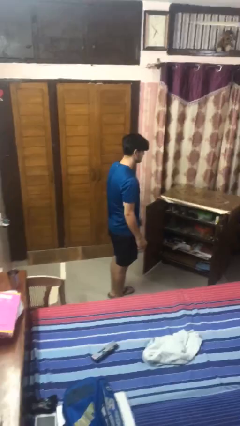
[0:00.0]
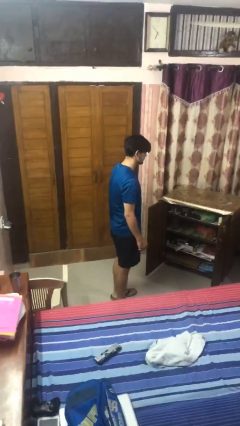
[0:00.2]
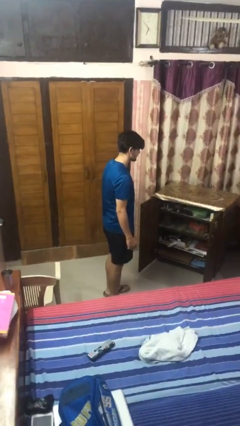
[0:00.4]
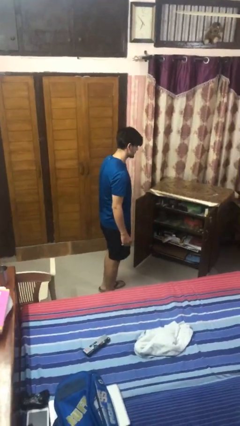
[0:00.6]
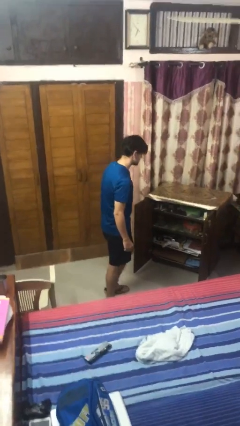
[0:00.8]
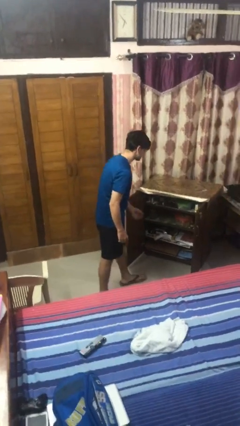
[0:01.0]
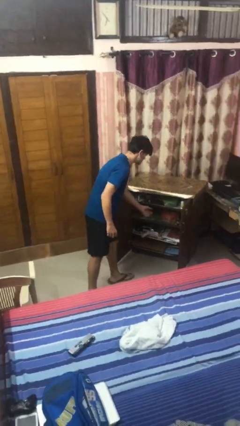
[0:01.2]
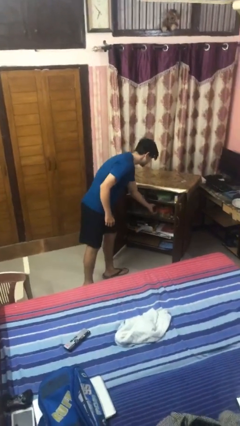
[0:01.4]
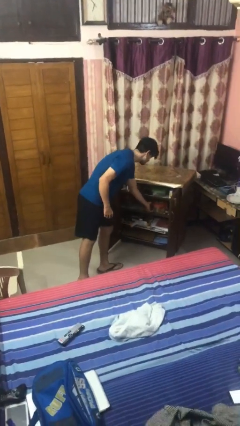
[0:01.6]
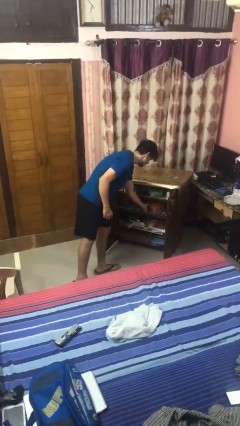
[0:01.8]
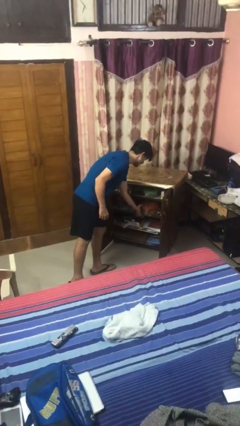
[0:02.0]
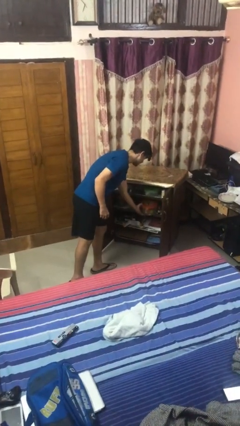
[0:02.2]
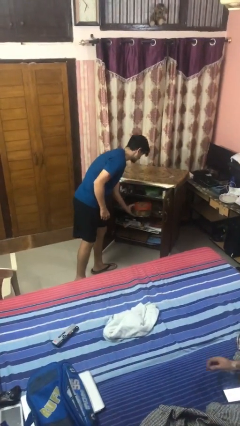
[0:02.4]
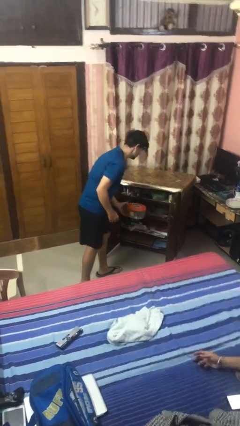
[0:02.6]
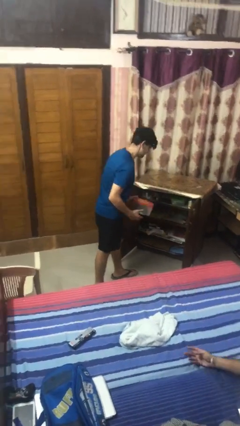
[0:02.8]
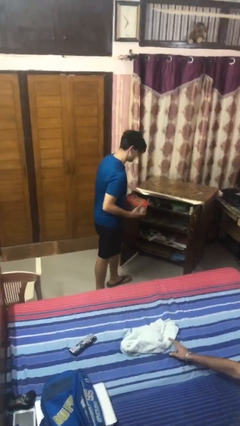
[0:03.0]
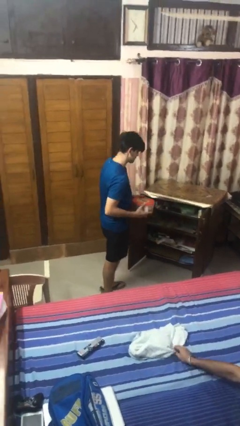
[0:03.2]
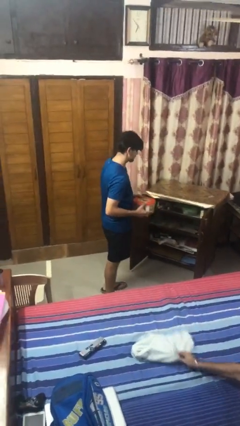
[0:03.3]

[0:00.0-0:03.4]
person picks up object from cabinet

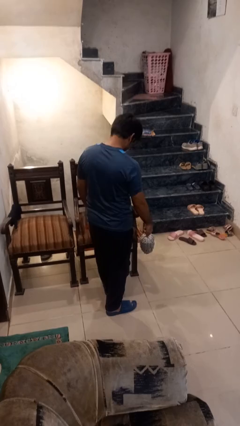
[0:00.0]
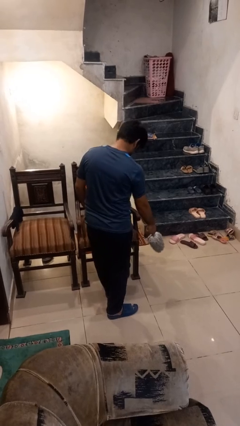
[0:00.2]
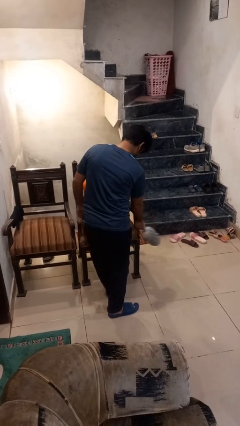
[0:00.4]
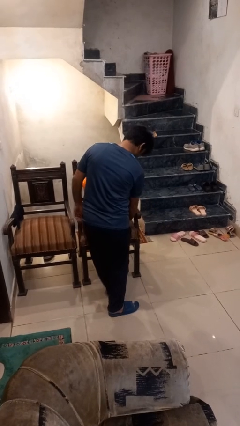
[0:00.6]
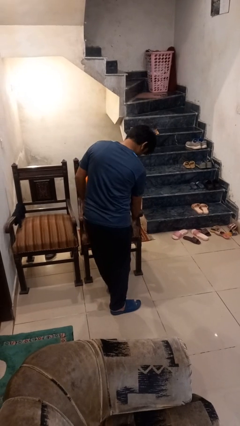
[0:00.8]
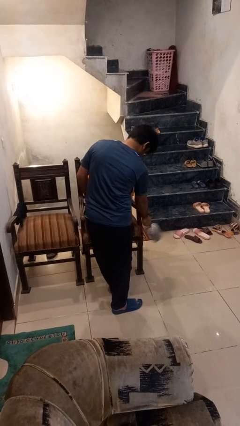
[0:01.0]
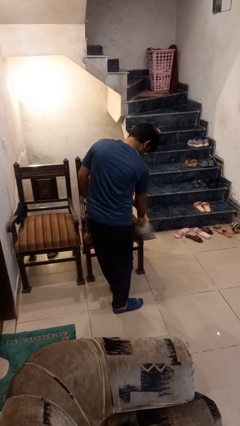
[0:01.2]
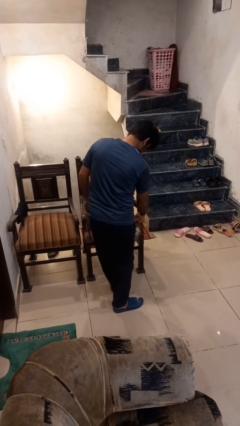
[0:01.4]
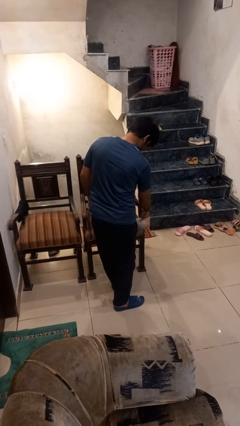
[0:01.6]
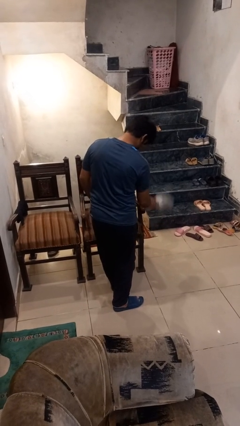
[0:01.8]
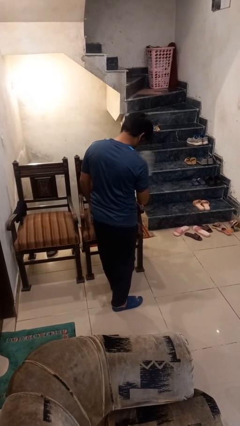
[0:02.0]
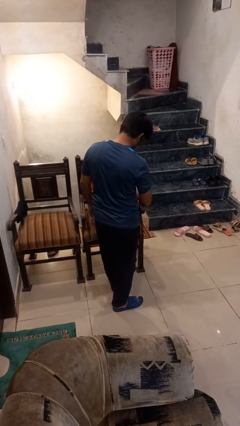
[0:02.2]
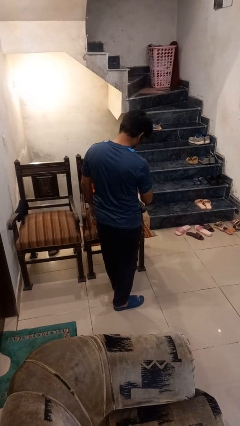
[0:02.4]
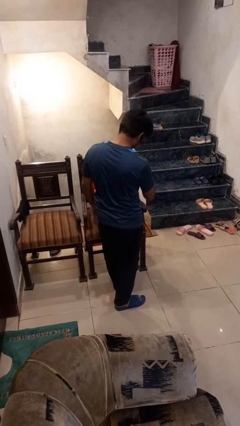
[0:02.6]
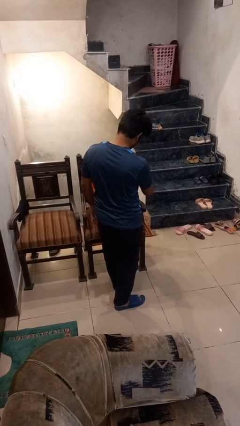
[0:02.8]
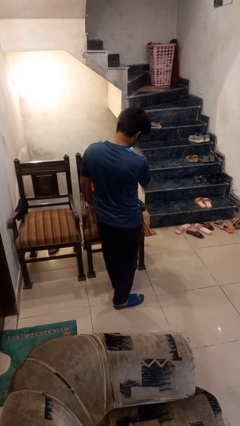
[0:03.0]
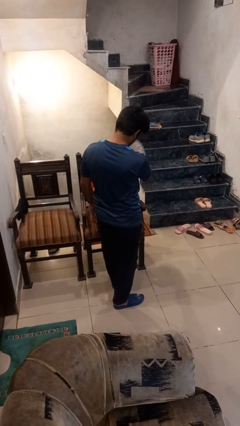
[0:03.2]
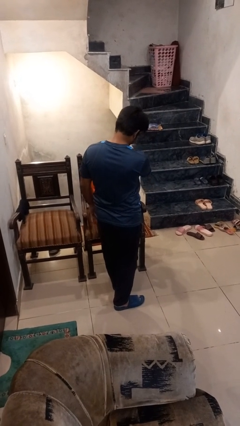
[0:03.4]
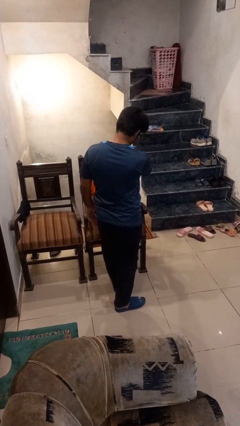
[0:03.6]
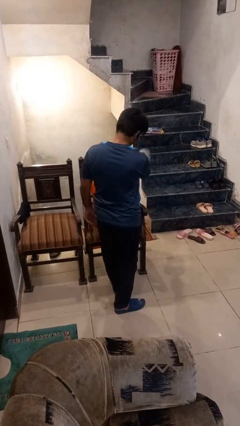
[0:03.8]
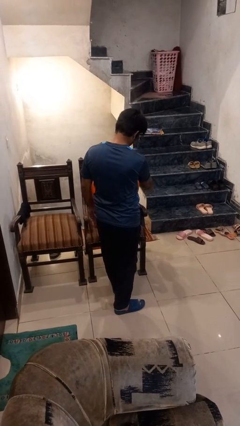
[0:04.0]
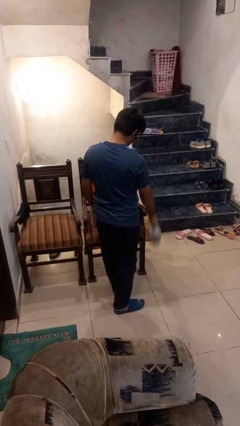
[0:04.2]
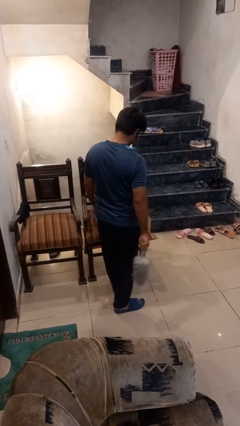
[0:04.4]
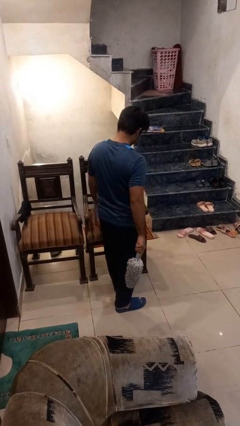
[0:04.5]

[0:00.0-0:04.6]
person dusts furniture

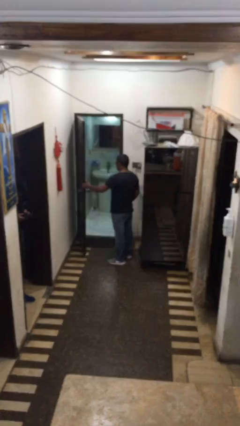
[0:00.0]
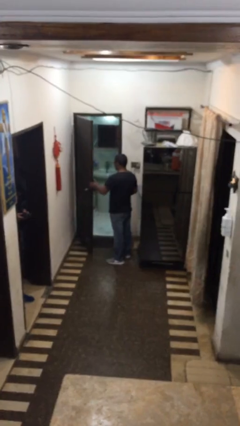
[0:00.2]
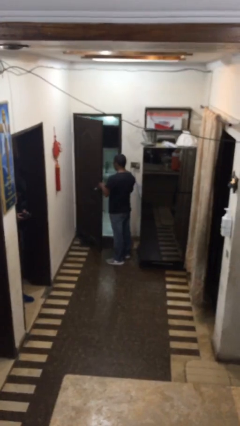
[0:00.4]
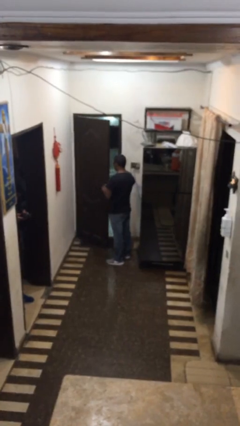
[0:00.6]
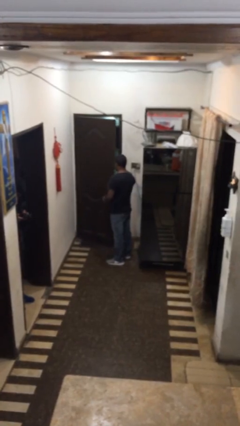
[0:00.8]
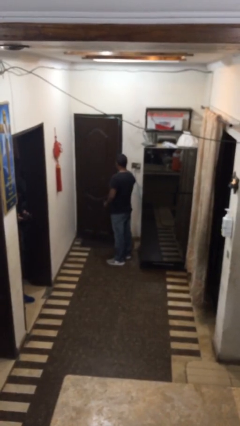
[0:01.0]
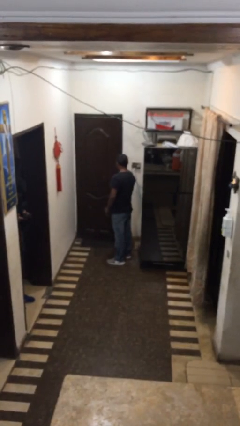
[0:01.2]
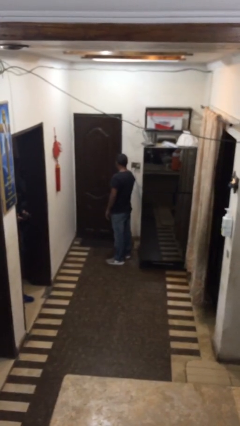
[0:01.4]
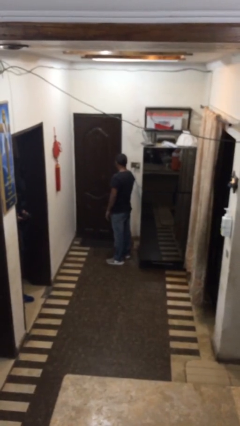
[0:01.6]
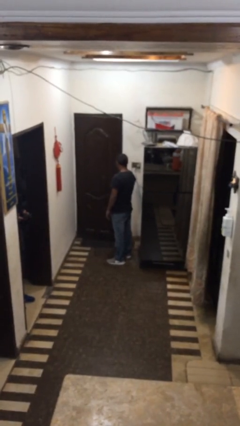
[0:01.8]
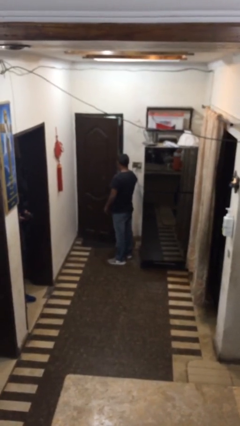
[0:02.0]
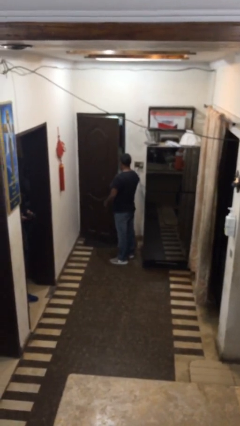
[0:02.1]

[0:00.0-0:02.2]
person closes facility door

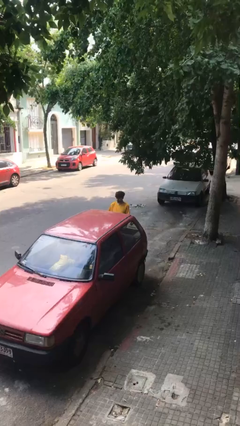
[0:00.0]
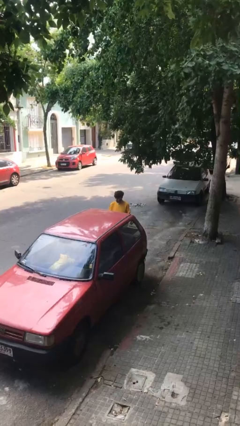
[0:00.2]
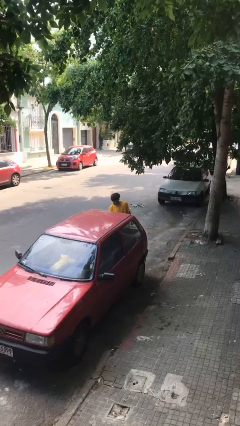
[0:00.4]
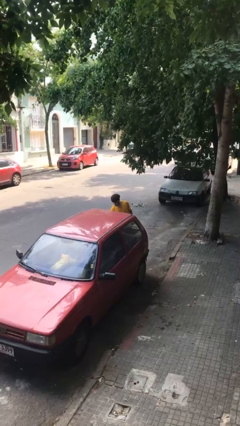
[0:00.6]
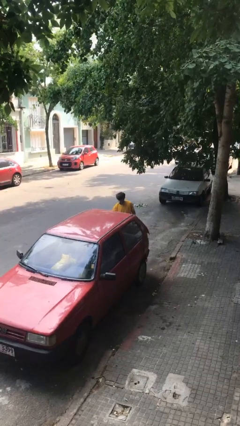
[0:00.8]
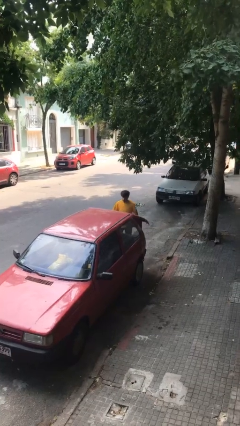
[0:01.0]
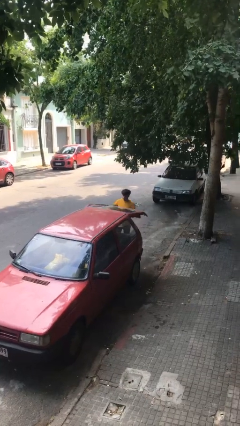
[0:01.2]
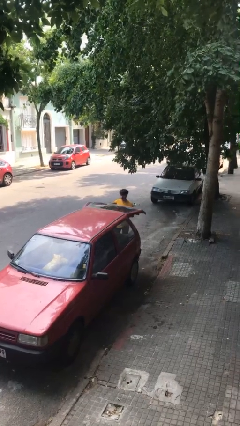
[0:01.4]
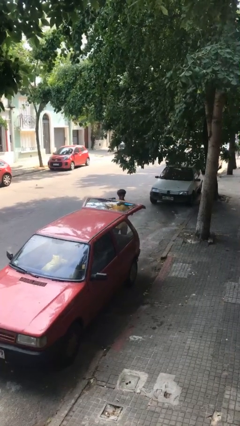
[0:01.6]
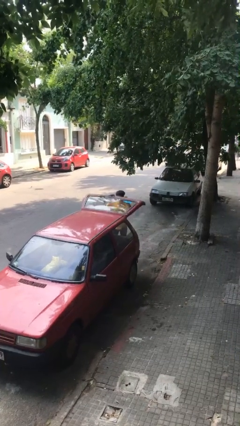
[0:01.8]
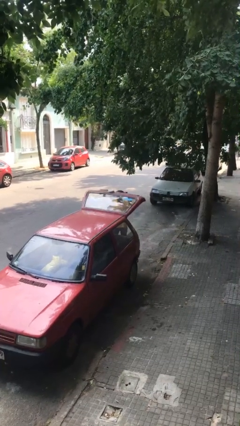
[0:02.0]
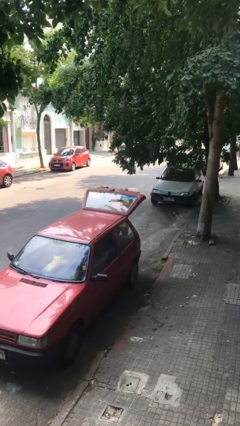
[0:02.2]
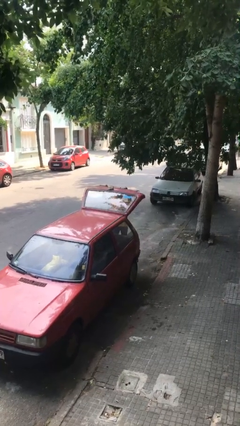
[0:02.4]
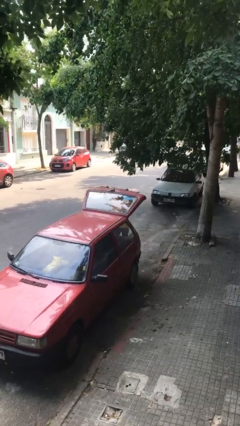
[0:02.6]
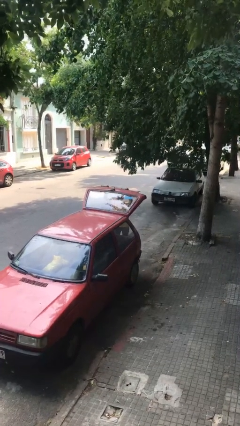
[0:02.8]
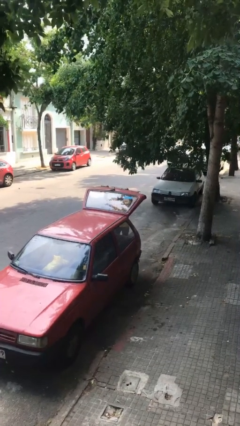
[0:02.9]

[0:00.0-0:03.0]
person opens car trunk

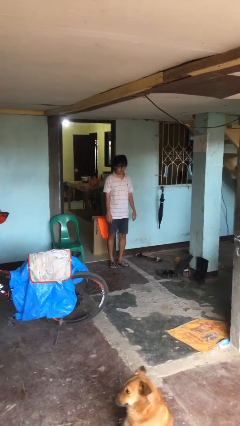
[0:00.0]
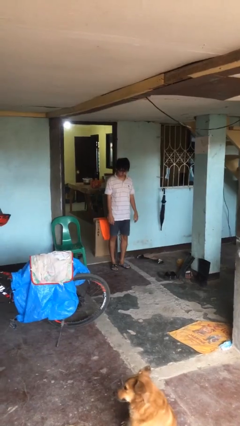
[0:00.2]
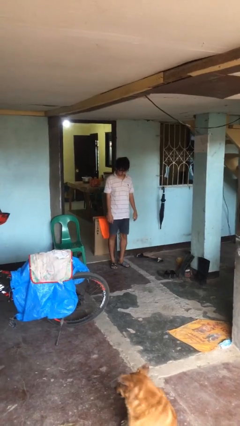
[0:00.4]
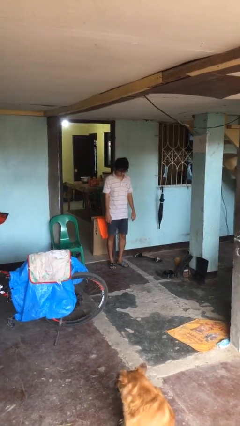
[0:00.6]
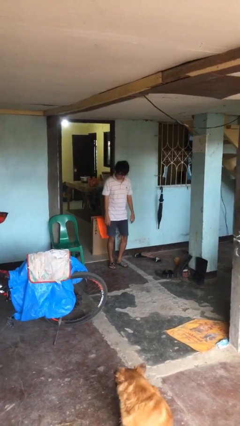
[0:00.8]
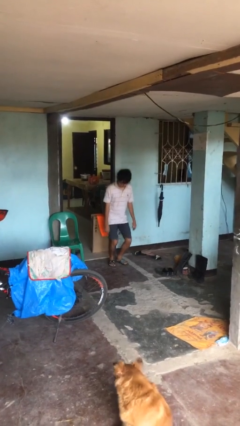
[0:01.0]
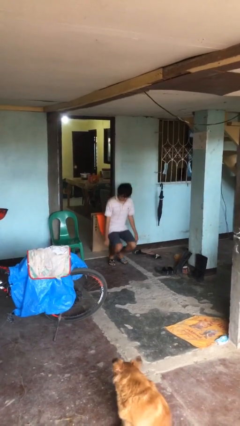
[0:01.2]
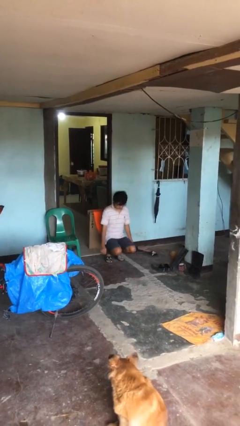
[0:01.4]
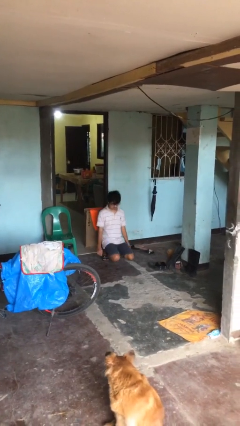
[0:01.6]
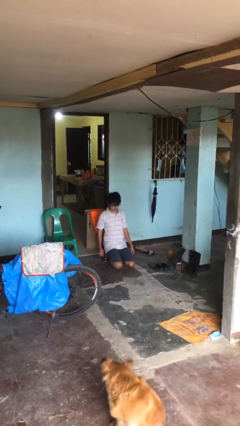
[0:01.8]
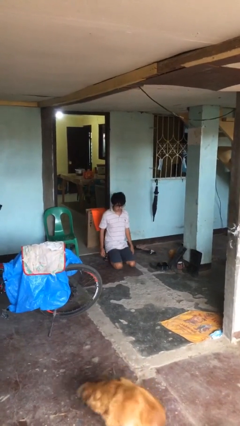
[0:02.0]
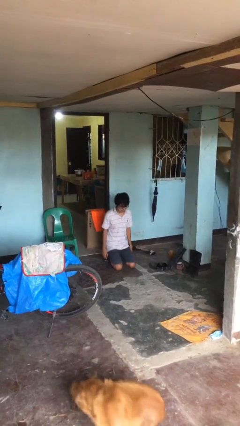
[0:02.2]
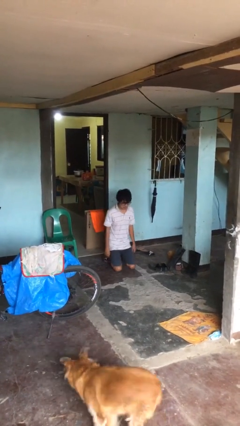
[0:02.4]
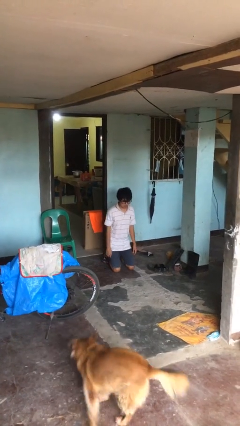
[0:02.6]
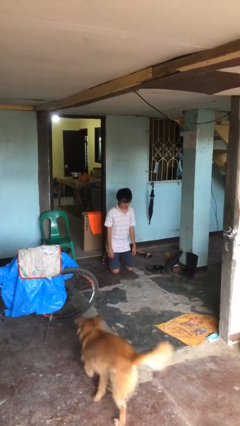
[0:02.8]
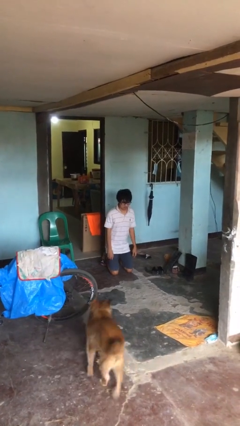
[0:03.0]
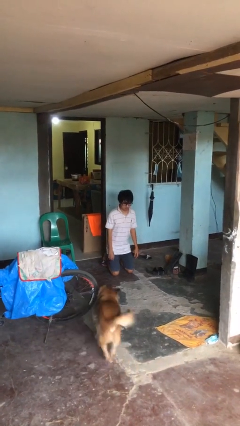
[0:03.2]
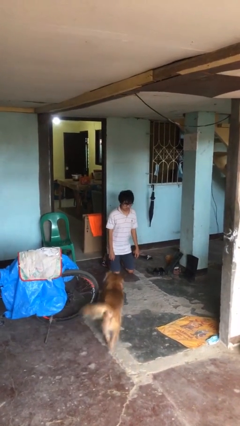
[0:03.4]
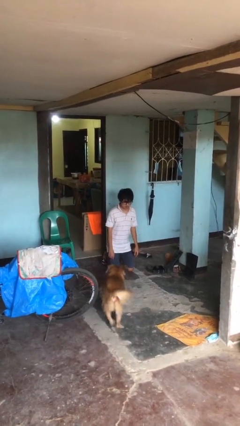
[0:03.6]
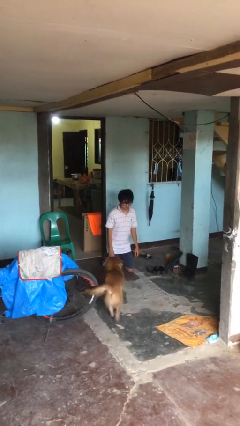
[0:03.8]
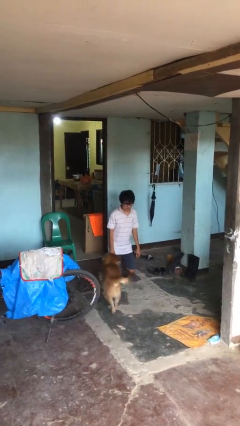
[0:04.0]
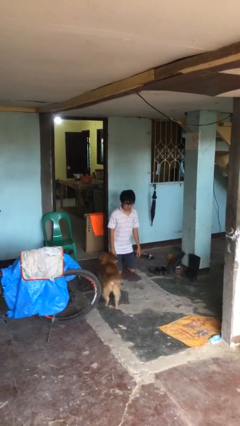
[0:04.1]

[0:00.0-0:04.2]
person kneels
